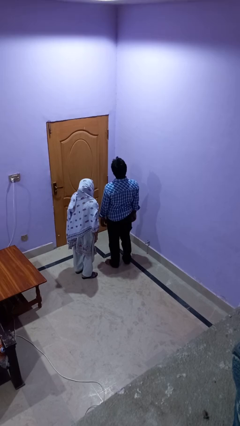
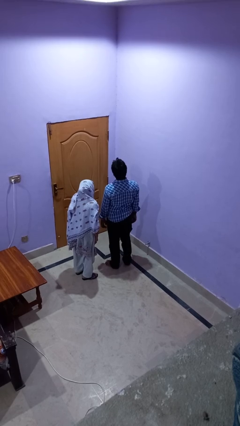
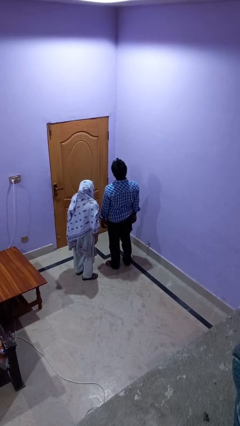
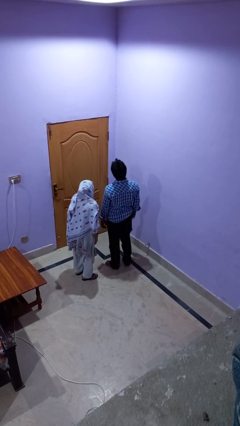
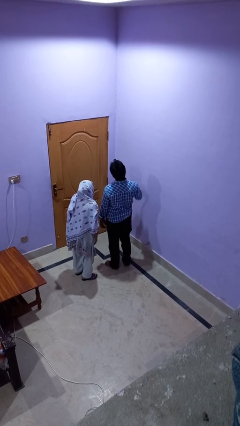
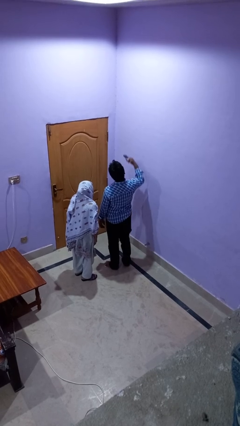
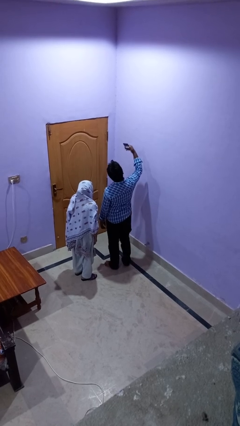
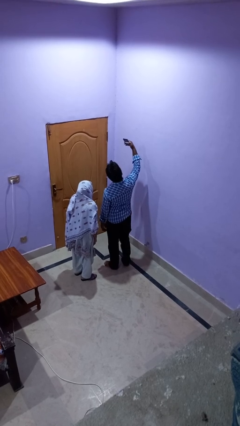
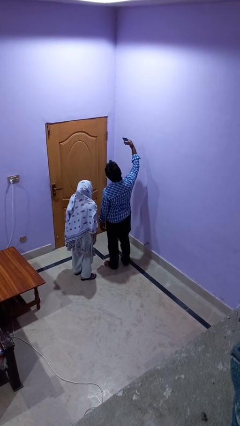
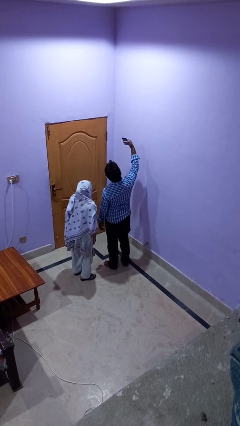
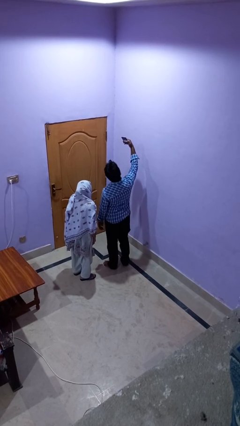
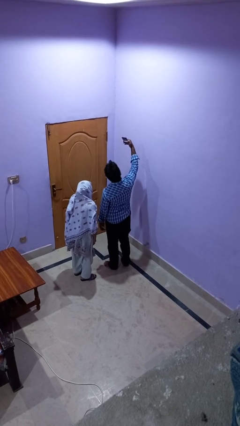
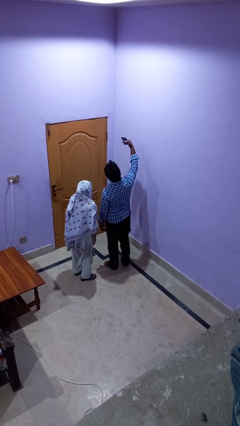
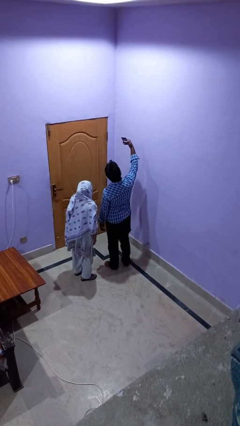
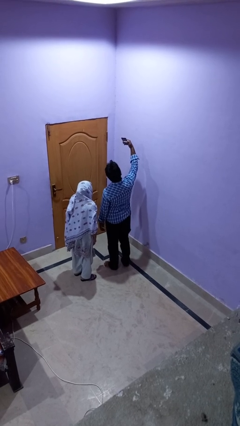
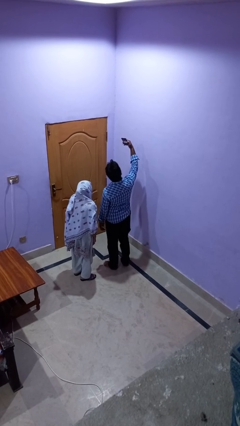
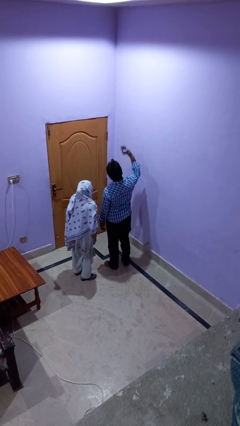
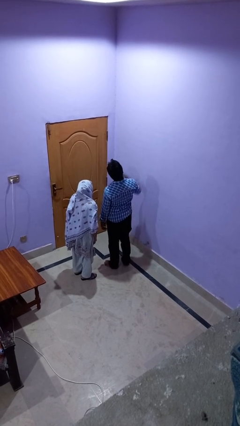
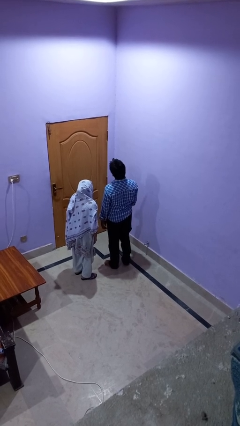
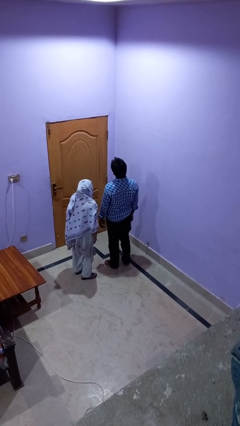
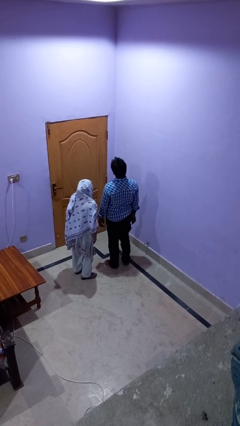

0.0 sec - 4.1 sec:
person takes selfie with person

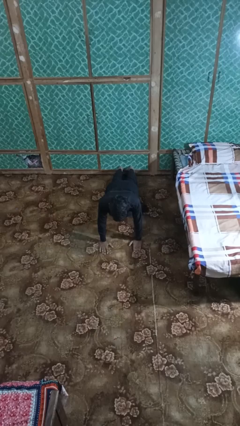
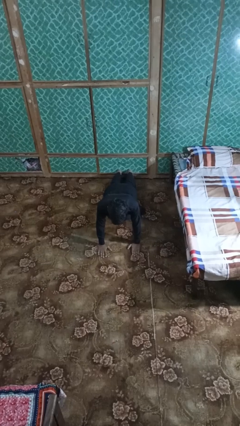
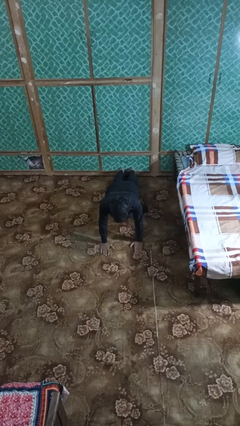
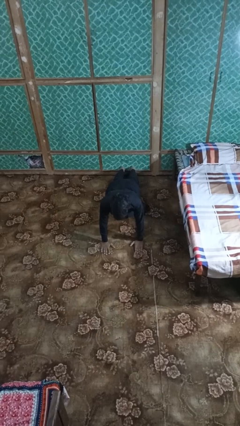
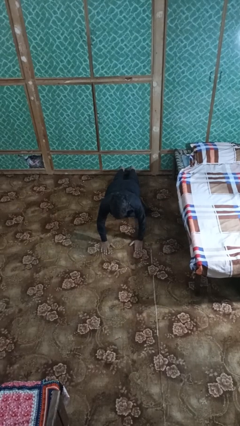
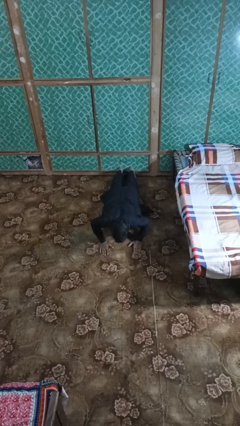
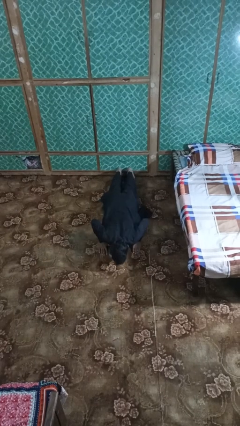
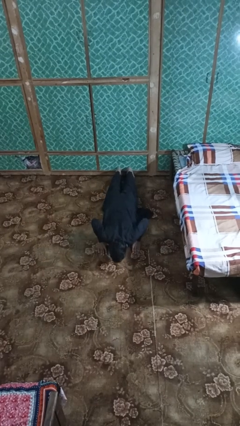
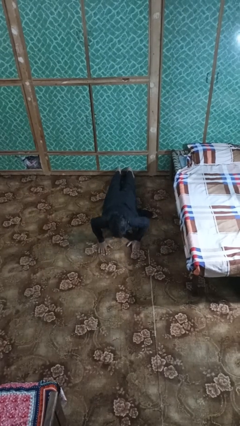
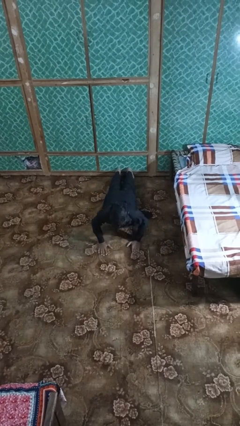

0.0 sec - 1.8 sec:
person exercises with pushup

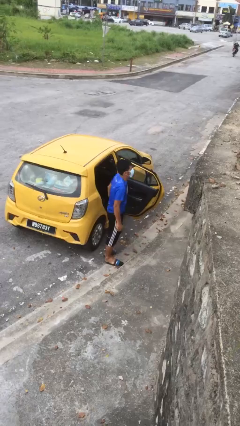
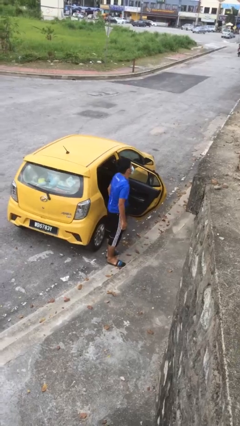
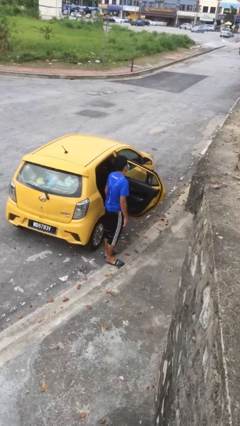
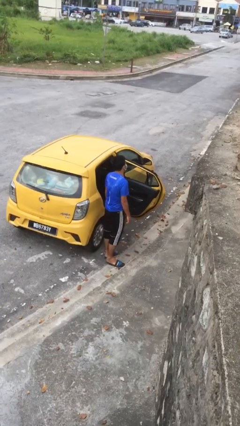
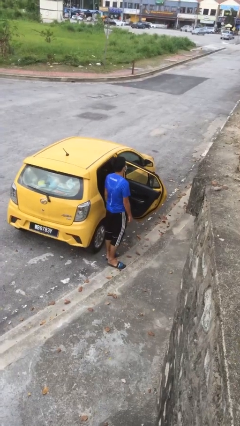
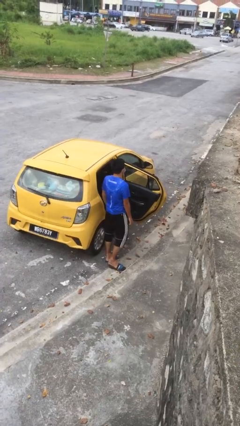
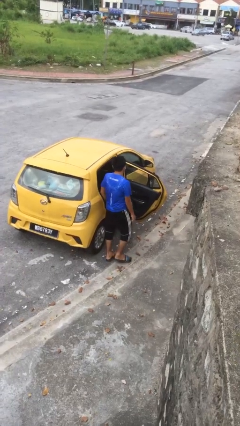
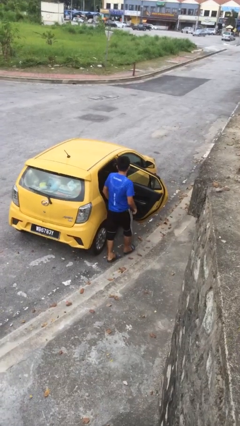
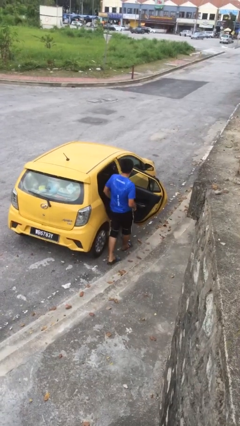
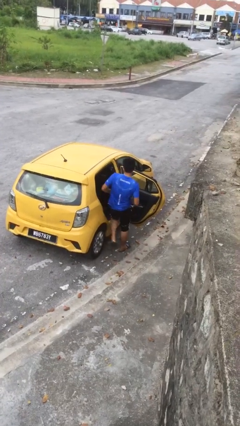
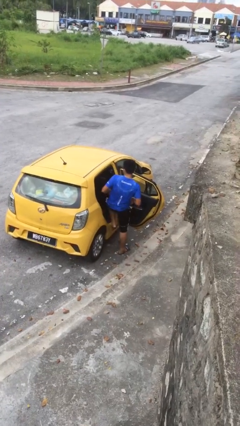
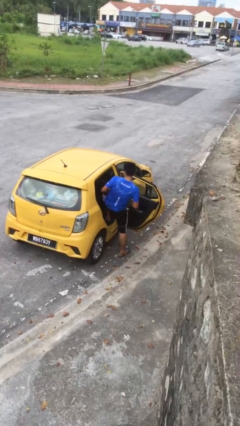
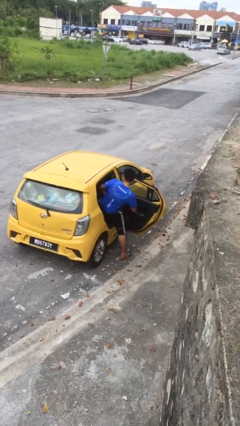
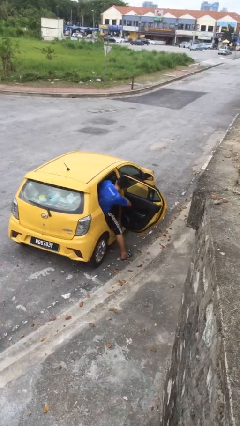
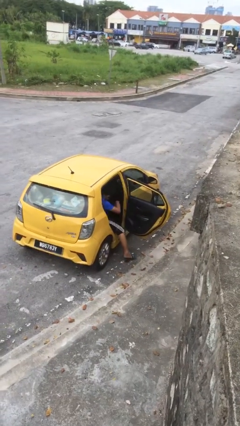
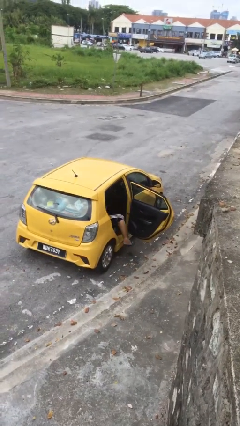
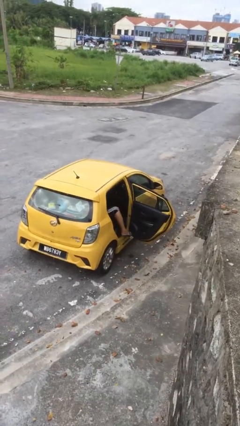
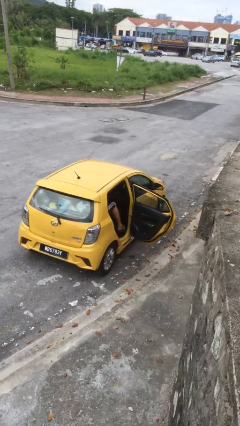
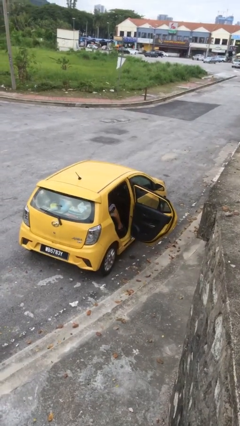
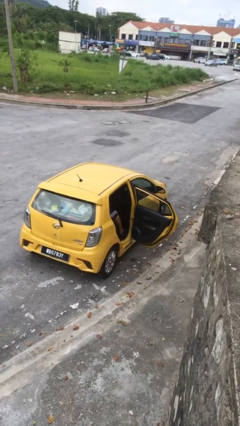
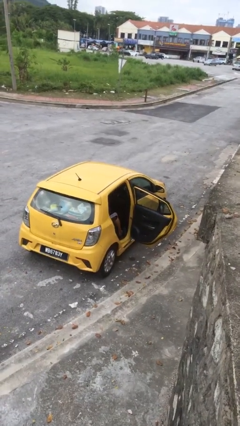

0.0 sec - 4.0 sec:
person enters car

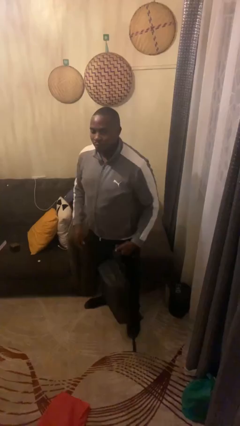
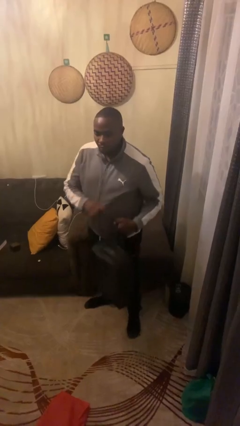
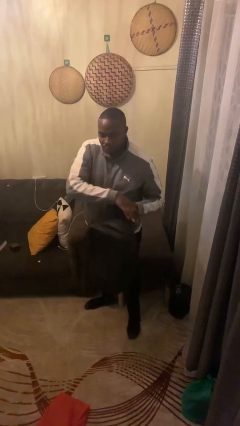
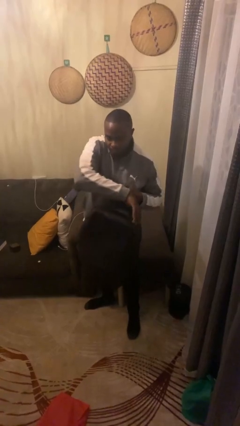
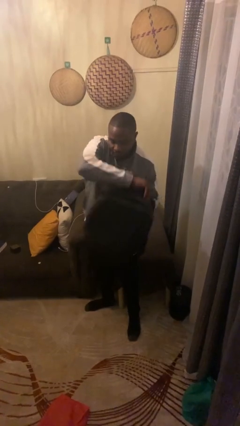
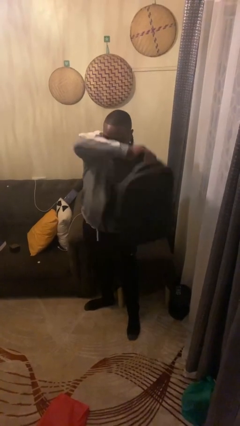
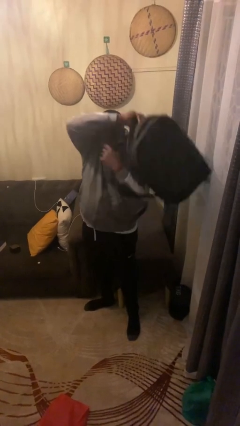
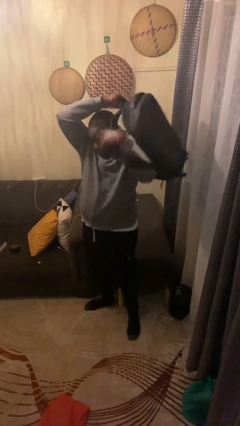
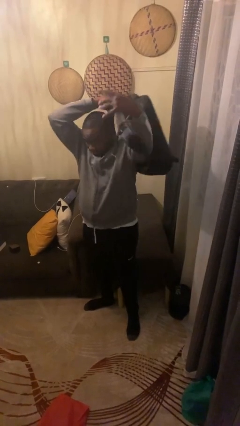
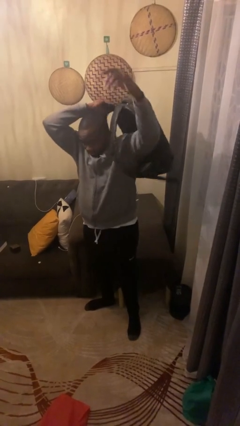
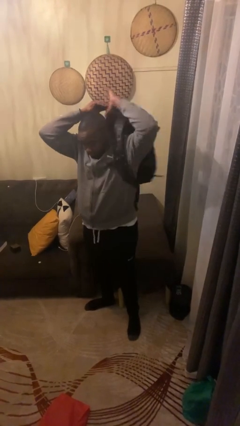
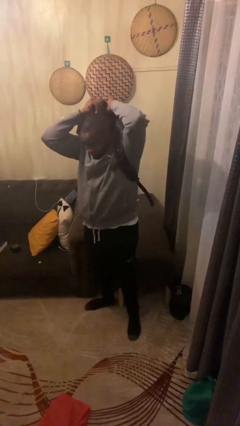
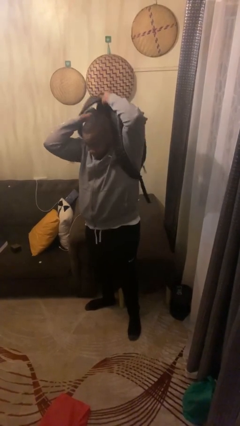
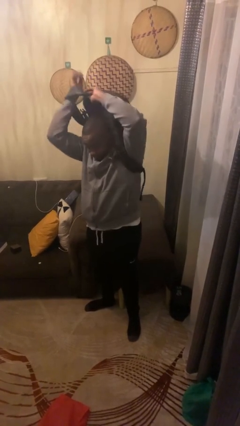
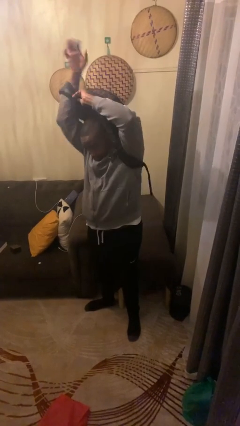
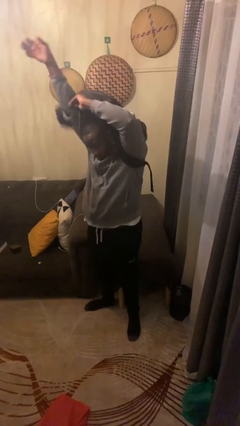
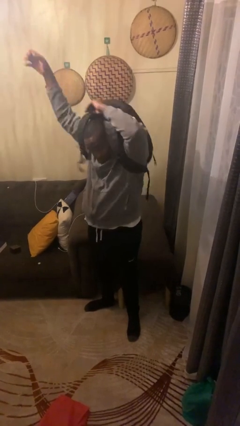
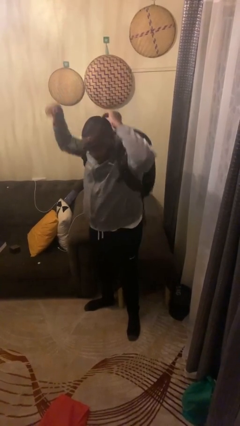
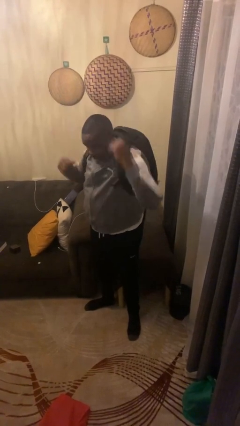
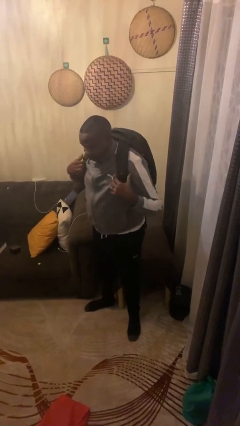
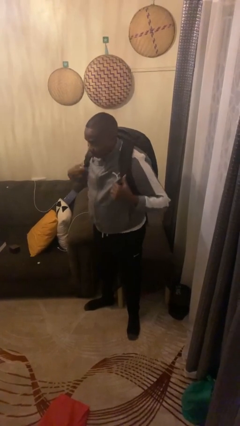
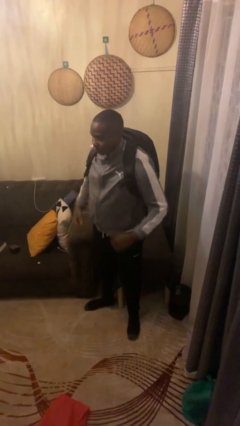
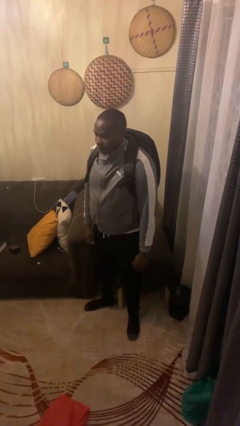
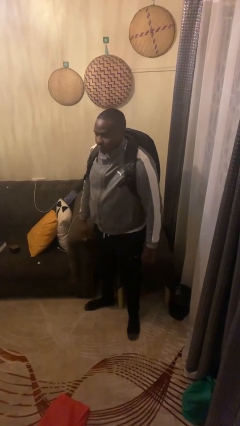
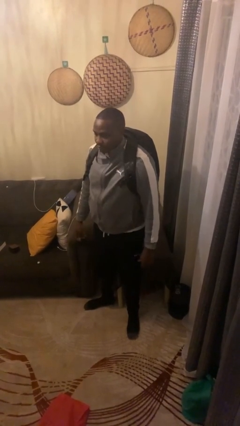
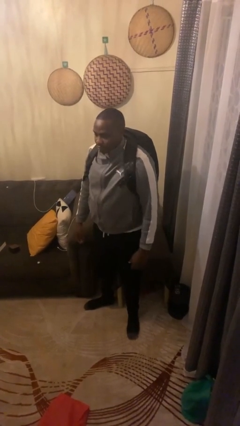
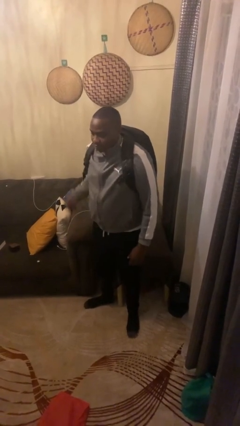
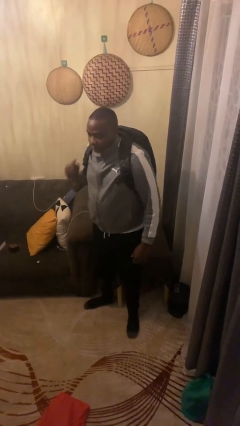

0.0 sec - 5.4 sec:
person puts on backpack

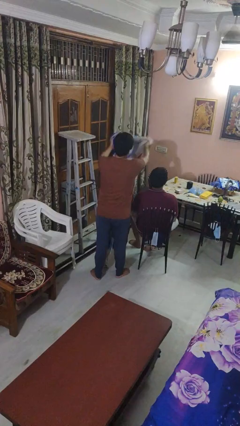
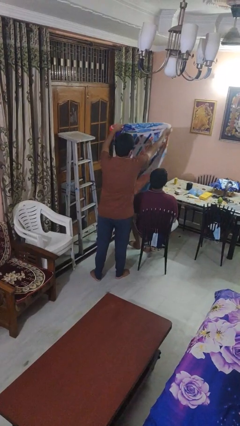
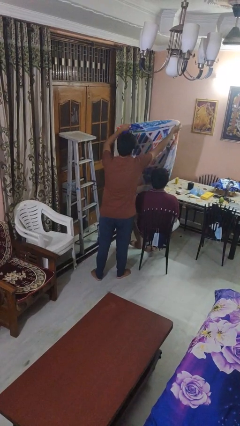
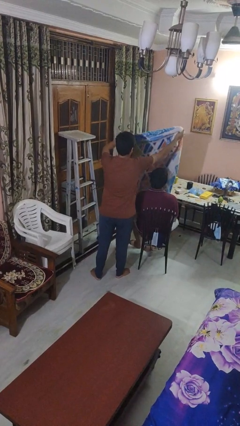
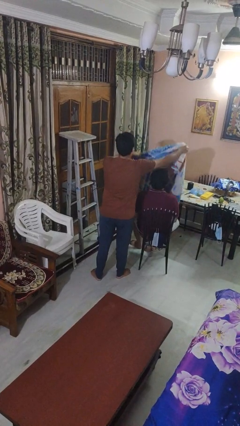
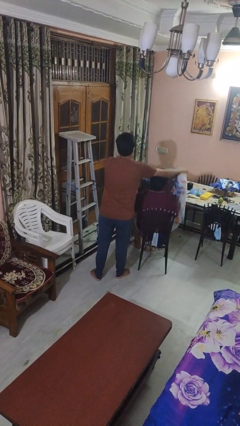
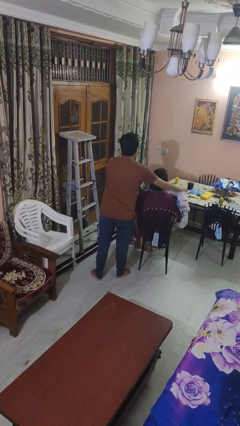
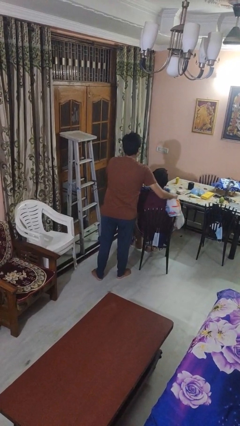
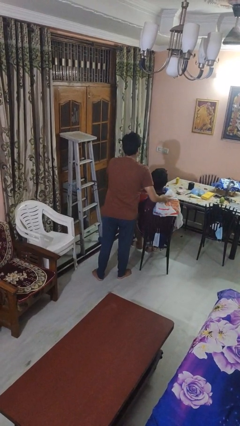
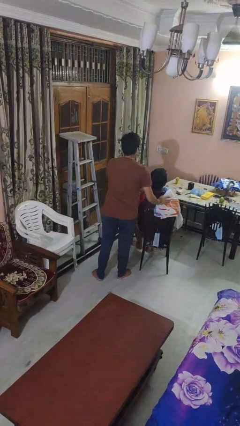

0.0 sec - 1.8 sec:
person covers friend with blanket
